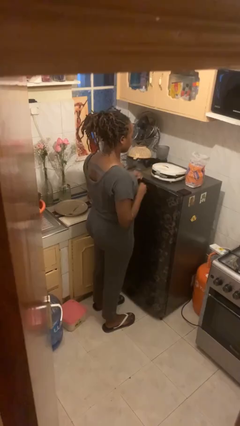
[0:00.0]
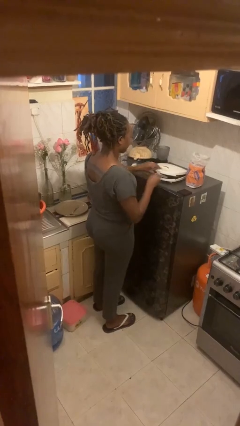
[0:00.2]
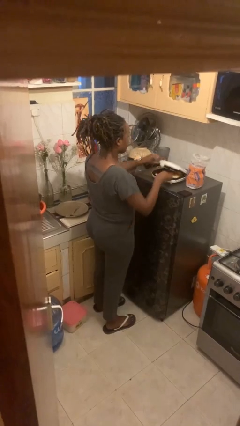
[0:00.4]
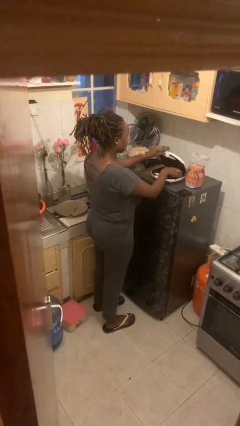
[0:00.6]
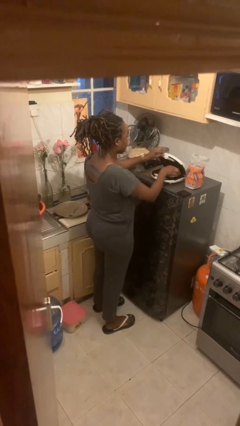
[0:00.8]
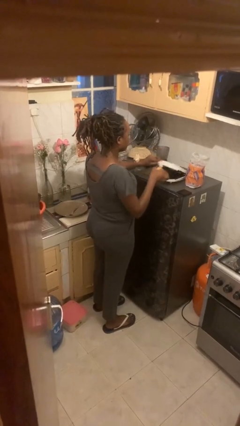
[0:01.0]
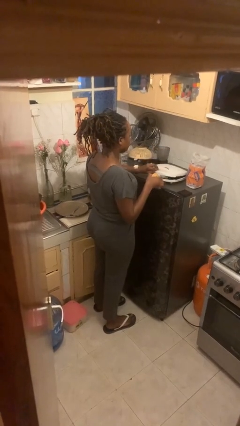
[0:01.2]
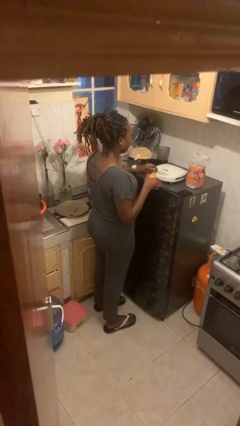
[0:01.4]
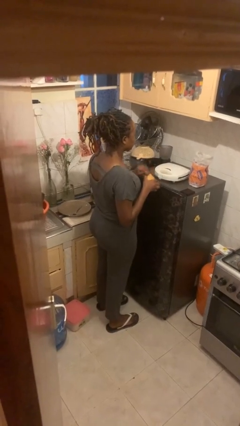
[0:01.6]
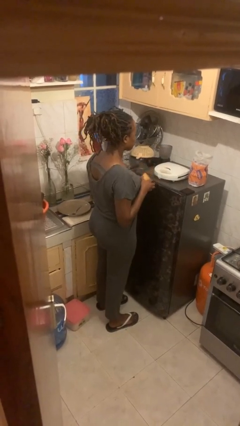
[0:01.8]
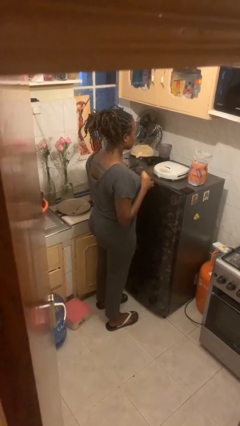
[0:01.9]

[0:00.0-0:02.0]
person takes object from toaster

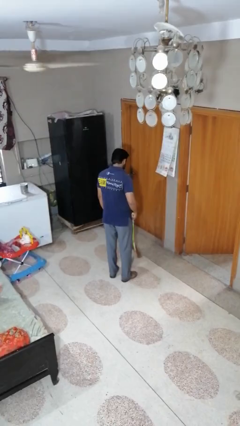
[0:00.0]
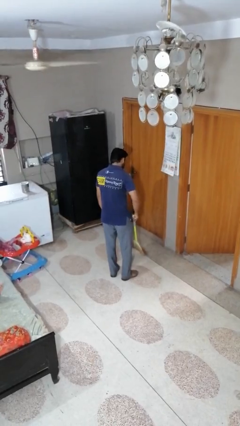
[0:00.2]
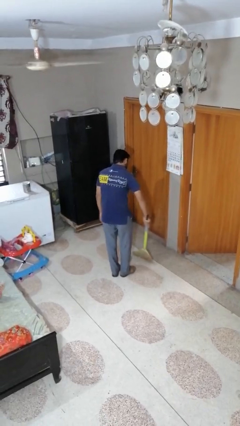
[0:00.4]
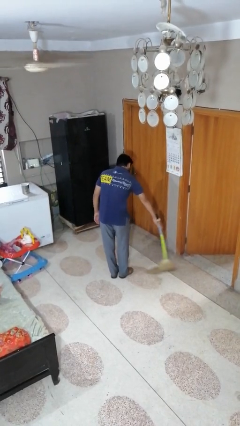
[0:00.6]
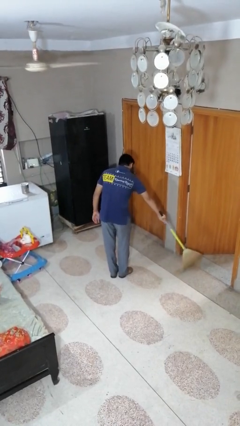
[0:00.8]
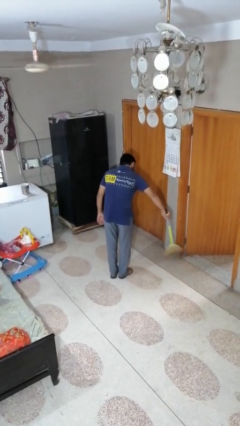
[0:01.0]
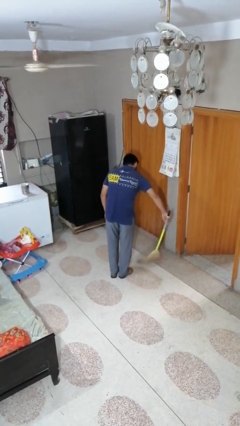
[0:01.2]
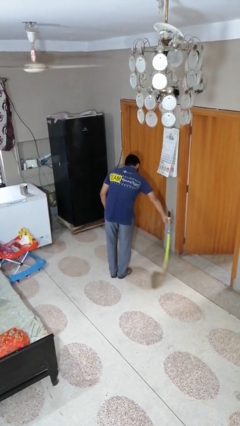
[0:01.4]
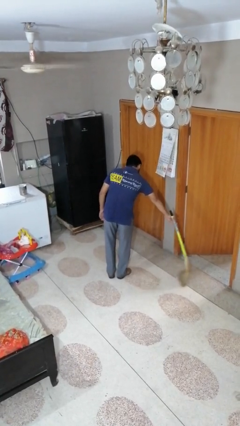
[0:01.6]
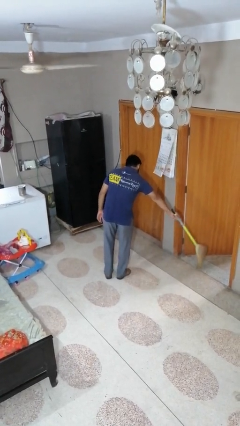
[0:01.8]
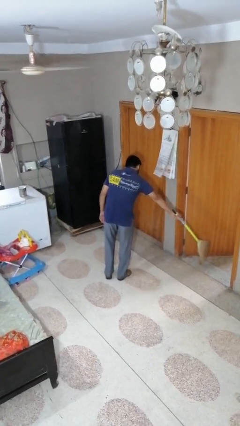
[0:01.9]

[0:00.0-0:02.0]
person sweeps floor

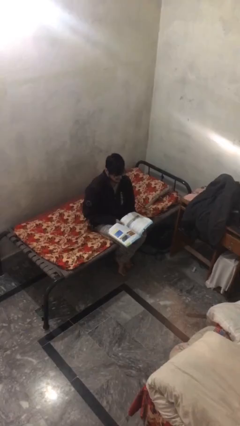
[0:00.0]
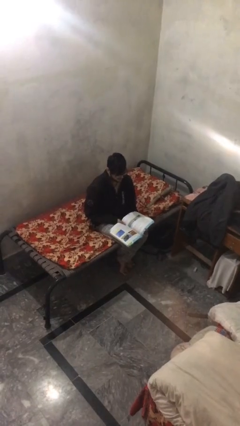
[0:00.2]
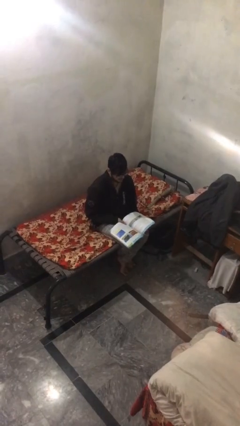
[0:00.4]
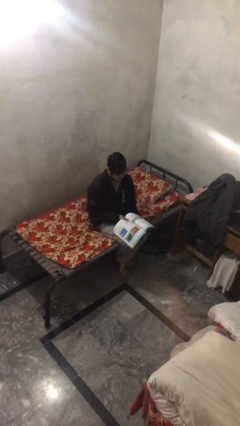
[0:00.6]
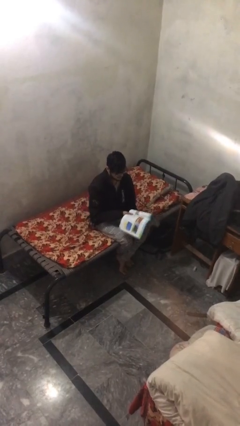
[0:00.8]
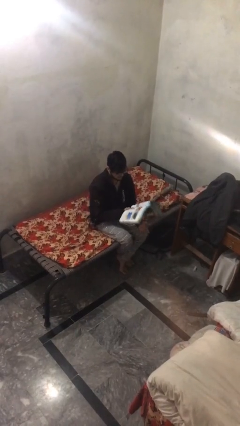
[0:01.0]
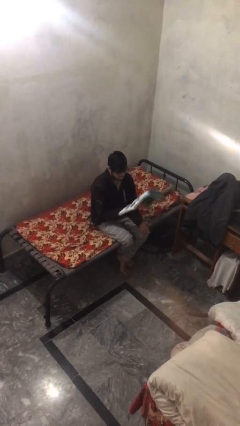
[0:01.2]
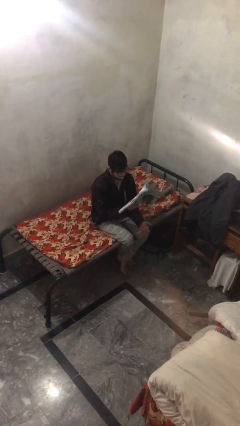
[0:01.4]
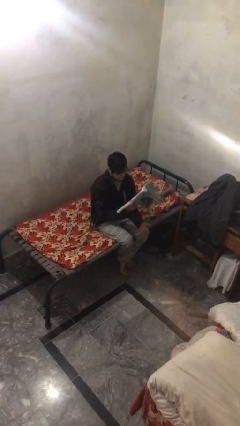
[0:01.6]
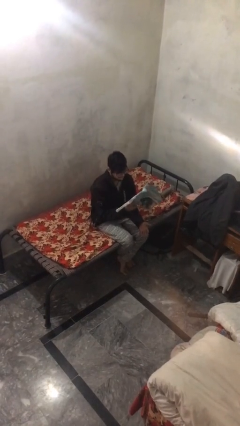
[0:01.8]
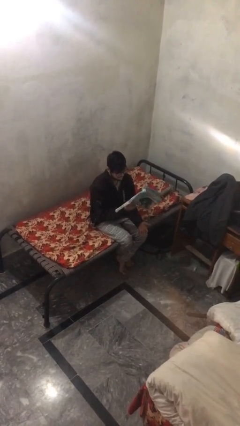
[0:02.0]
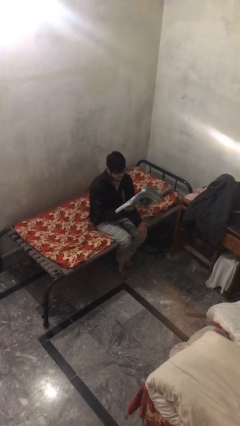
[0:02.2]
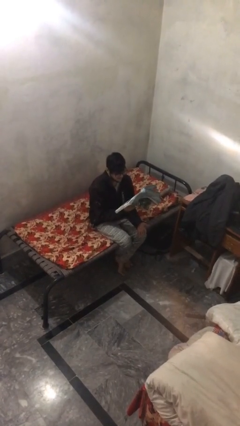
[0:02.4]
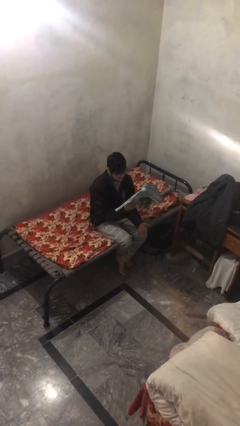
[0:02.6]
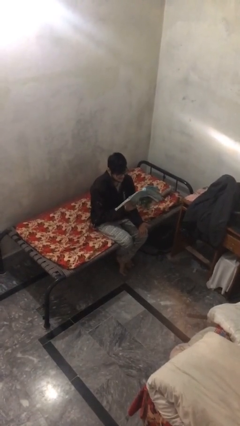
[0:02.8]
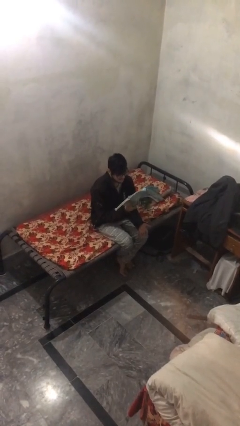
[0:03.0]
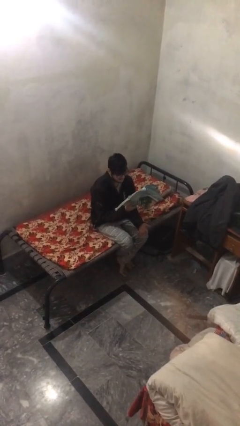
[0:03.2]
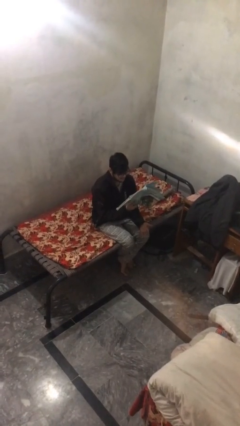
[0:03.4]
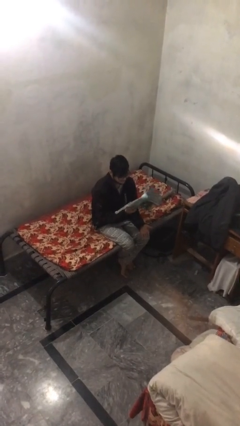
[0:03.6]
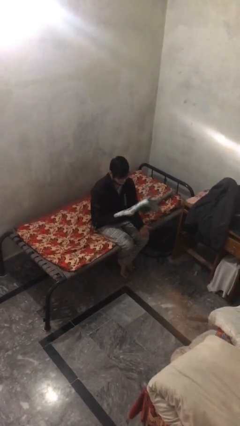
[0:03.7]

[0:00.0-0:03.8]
person reads document

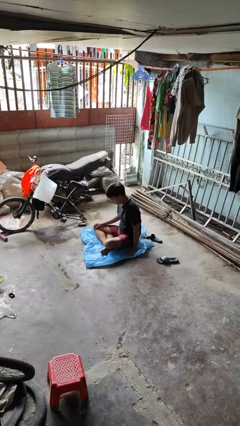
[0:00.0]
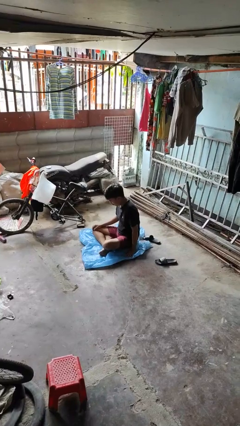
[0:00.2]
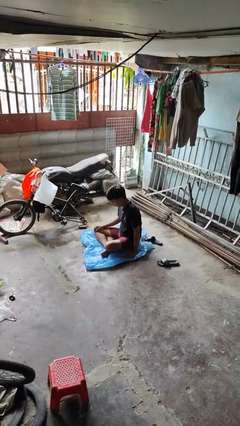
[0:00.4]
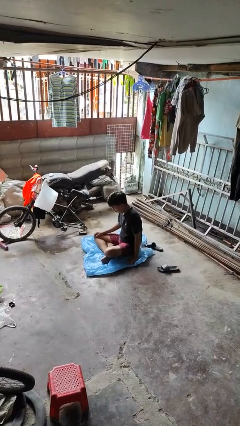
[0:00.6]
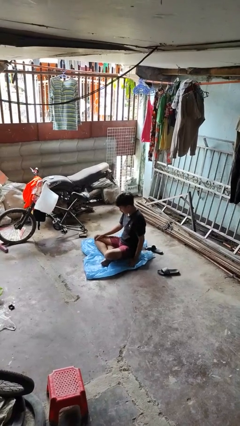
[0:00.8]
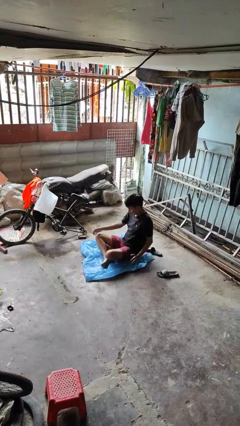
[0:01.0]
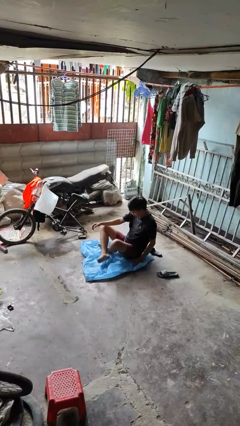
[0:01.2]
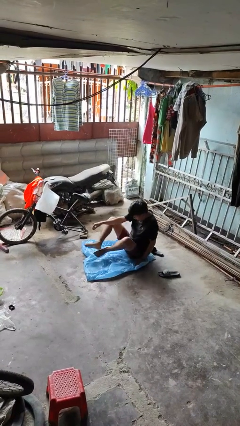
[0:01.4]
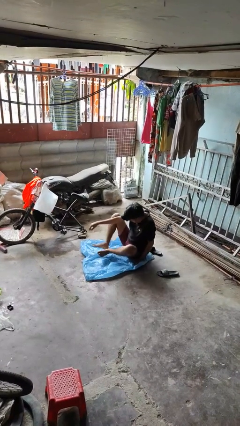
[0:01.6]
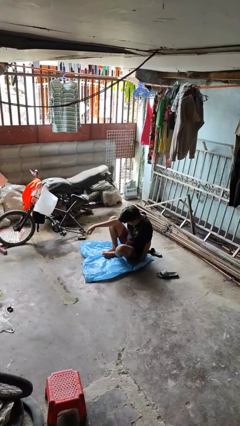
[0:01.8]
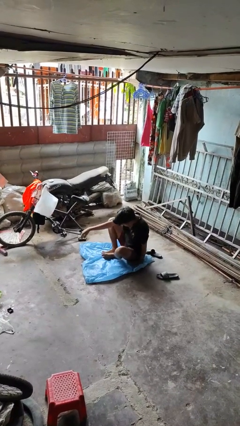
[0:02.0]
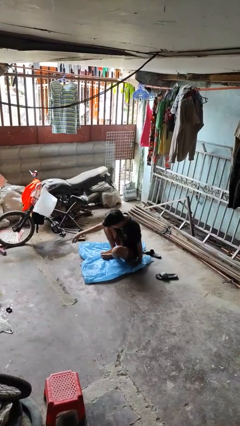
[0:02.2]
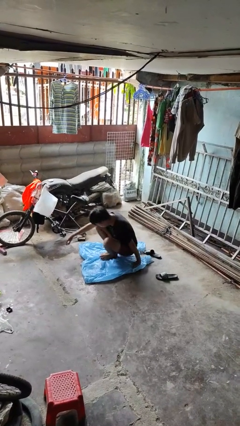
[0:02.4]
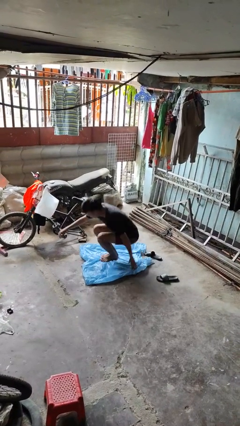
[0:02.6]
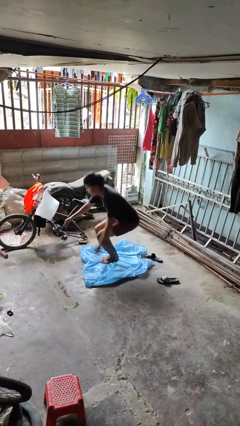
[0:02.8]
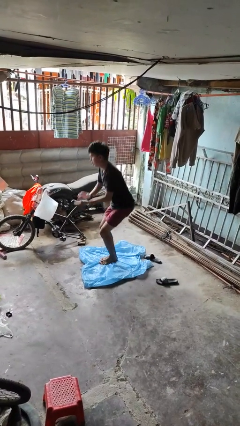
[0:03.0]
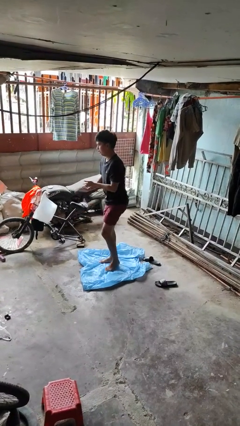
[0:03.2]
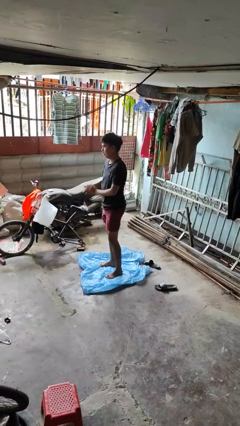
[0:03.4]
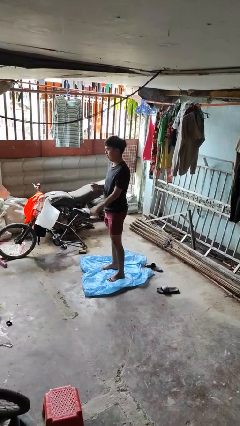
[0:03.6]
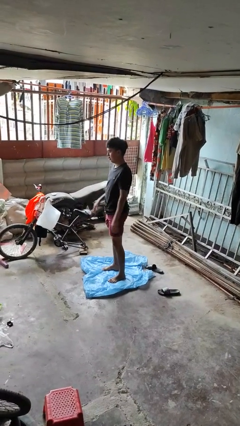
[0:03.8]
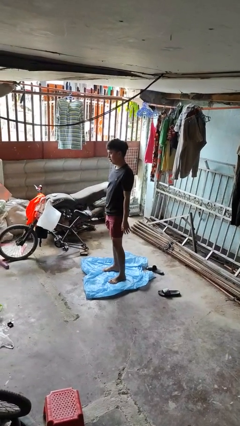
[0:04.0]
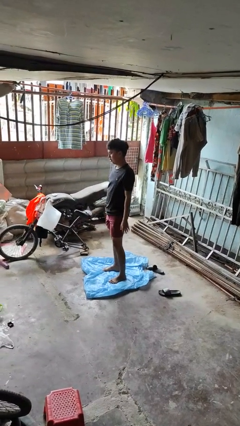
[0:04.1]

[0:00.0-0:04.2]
person stands up from floor

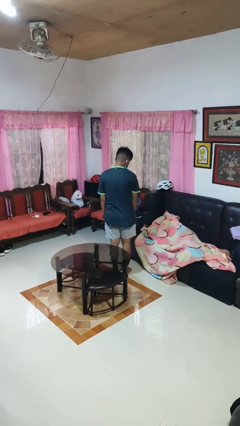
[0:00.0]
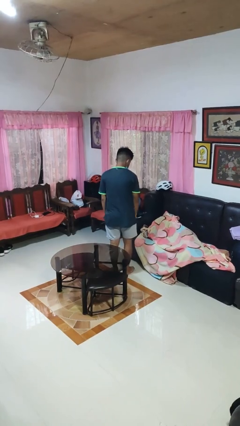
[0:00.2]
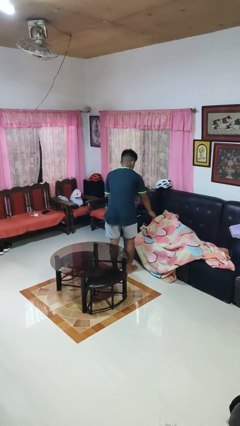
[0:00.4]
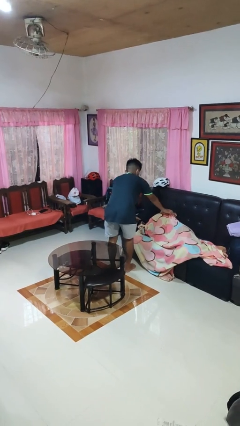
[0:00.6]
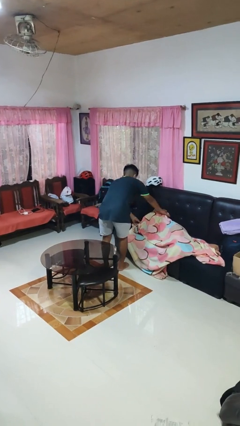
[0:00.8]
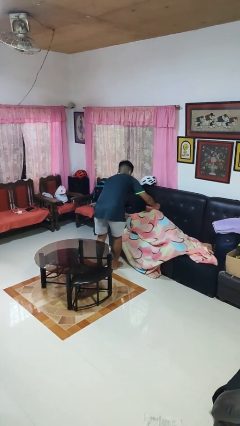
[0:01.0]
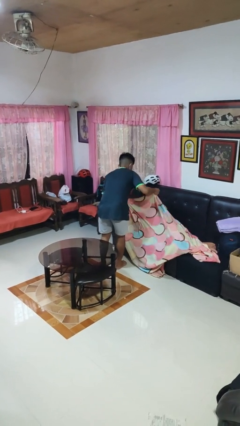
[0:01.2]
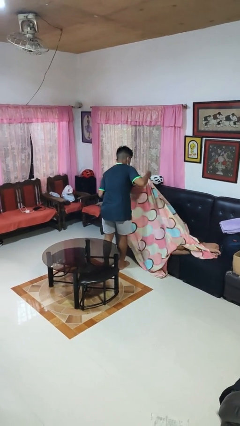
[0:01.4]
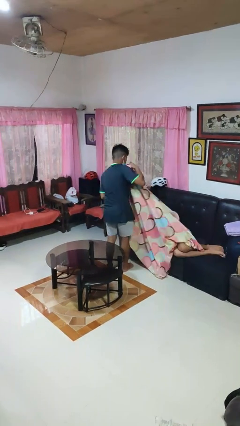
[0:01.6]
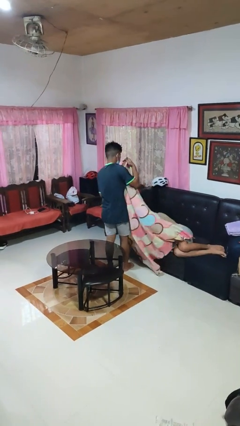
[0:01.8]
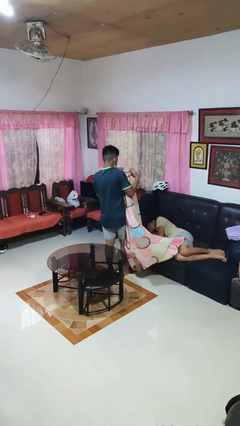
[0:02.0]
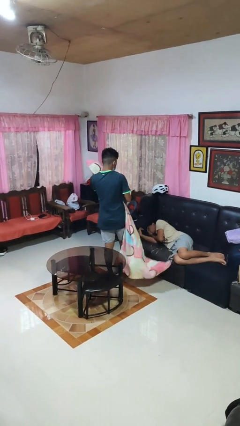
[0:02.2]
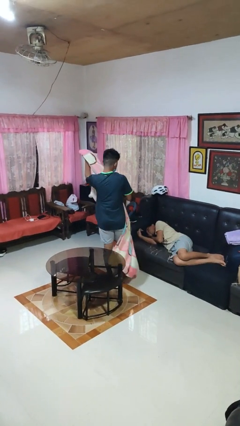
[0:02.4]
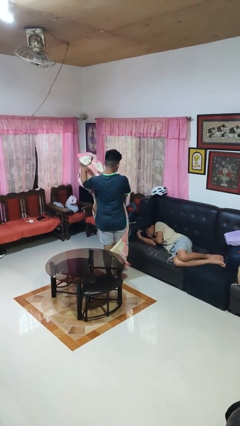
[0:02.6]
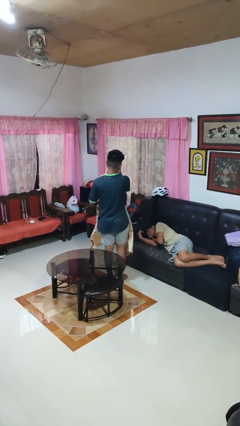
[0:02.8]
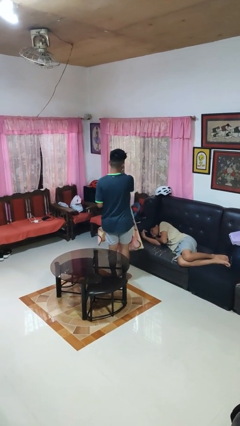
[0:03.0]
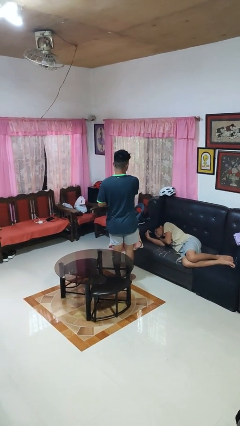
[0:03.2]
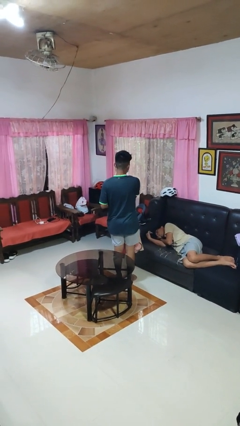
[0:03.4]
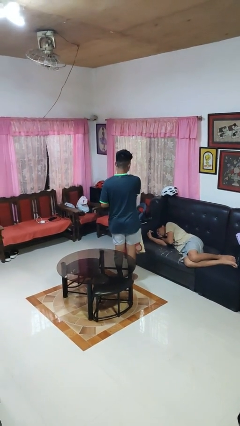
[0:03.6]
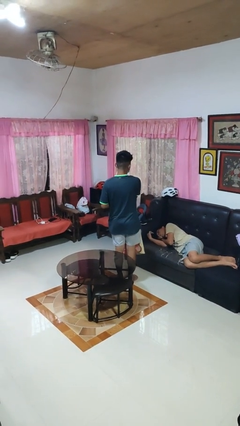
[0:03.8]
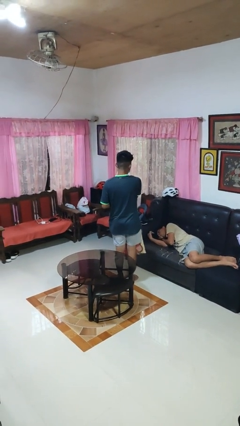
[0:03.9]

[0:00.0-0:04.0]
person uncovers friend with blanket

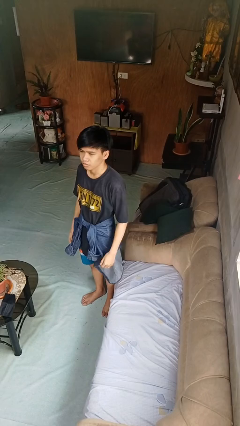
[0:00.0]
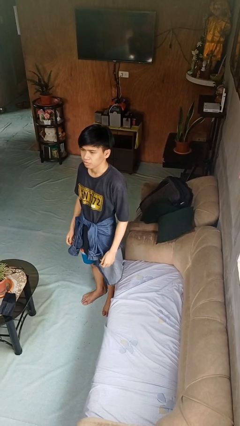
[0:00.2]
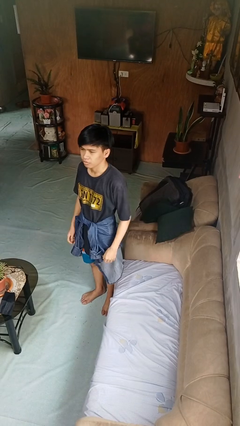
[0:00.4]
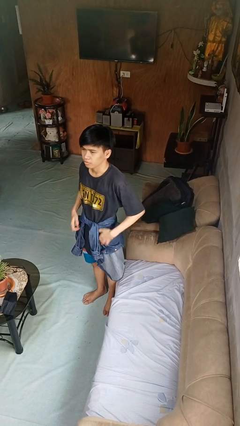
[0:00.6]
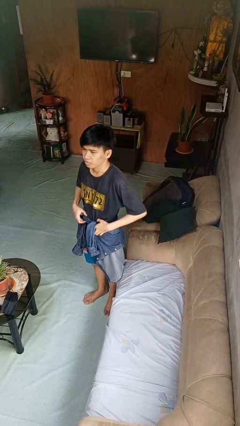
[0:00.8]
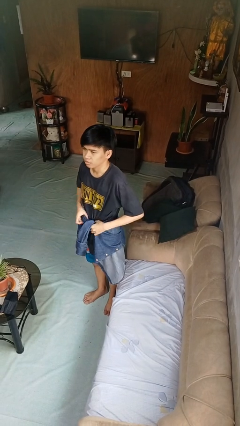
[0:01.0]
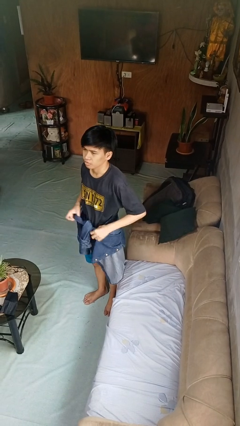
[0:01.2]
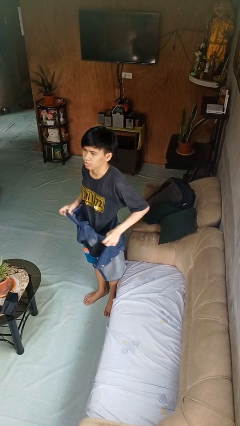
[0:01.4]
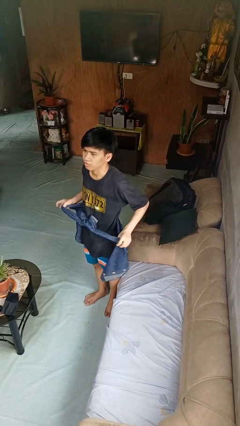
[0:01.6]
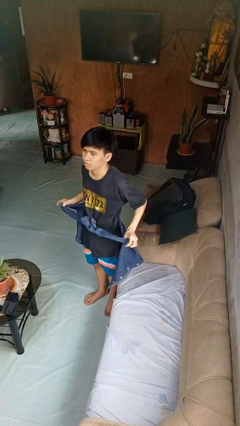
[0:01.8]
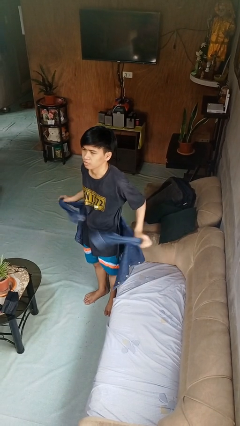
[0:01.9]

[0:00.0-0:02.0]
person unties jacket around waist
